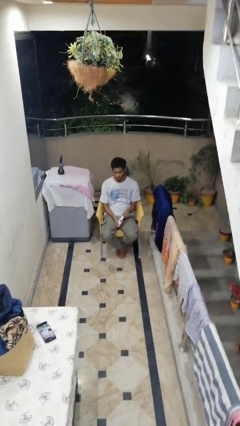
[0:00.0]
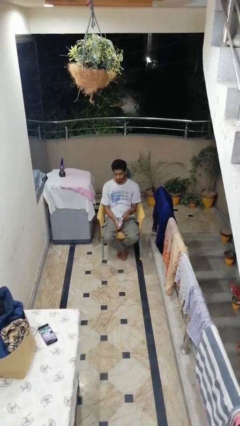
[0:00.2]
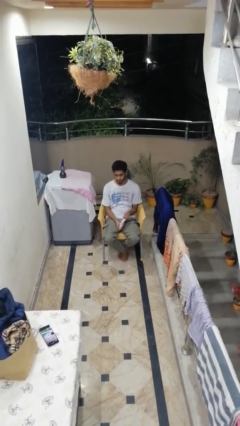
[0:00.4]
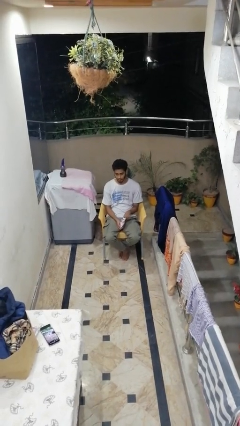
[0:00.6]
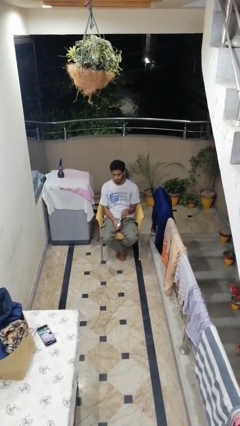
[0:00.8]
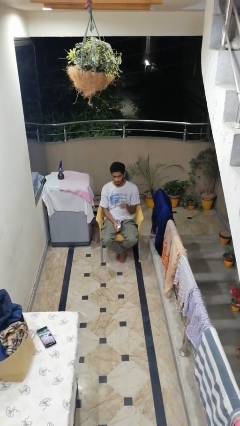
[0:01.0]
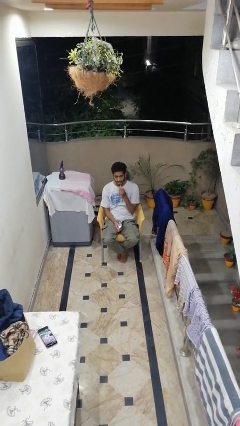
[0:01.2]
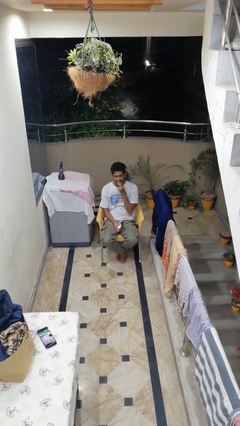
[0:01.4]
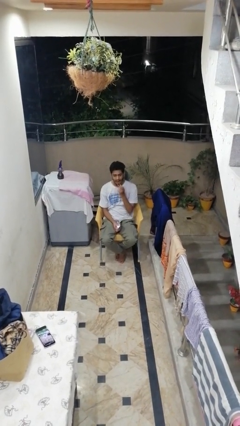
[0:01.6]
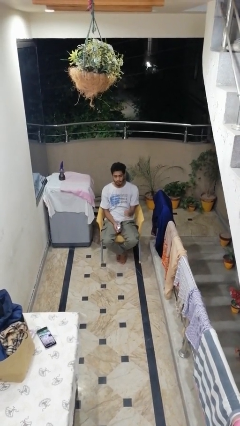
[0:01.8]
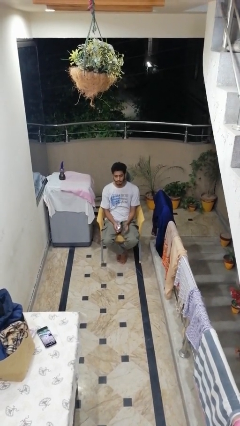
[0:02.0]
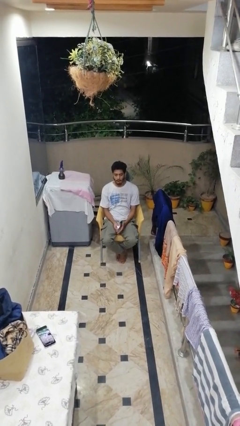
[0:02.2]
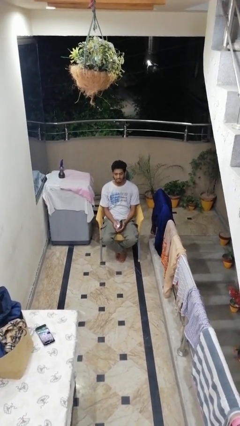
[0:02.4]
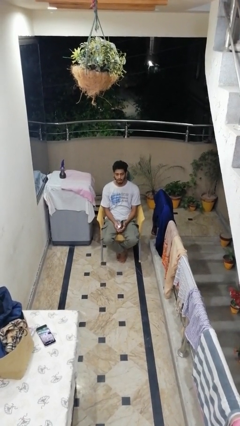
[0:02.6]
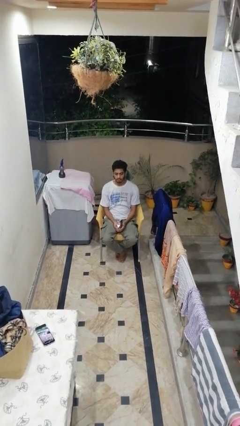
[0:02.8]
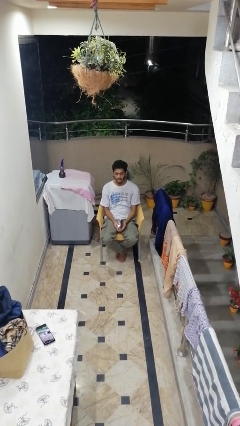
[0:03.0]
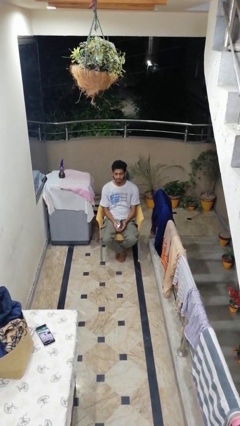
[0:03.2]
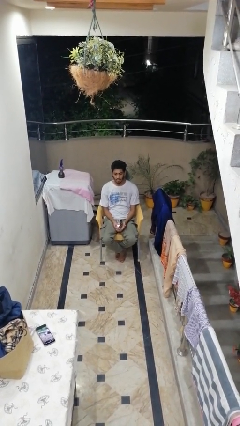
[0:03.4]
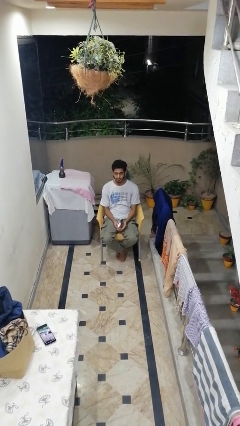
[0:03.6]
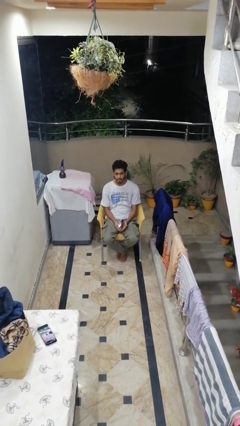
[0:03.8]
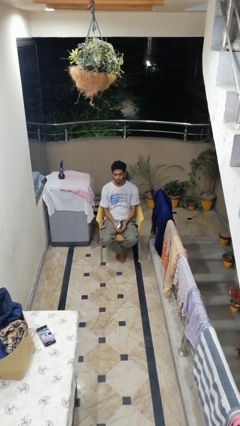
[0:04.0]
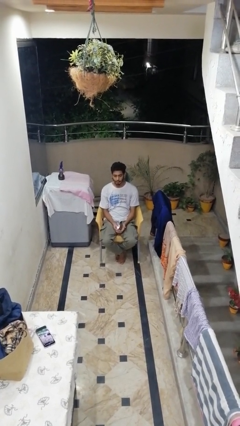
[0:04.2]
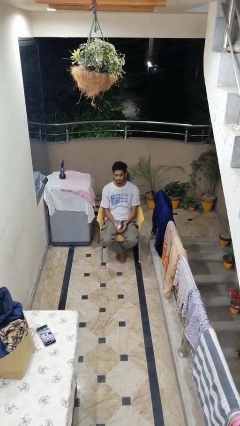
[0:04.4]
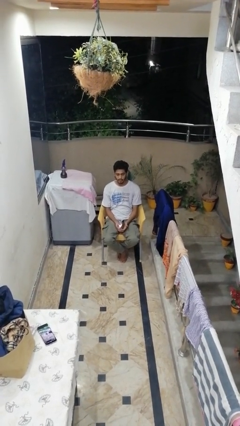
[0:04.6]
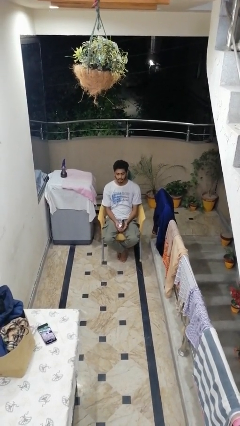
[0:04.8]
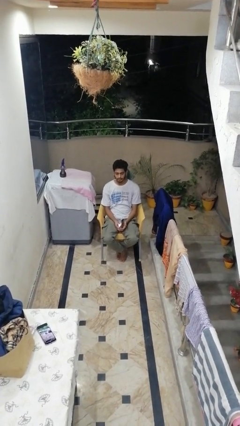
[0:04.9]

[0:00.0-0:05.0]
person eats snack from bag

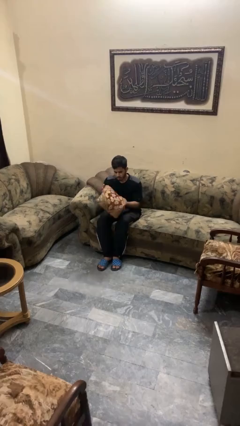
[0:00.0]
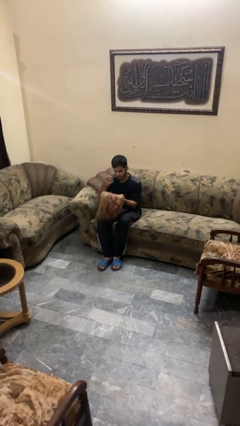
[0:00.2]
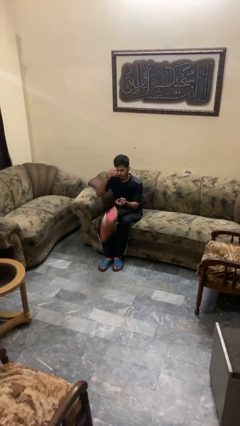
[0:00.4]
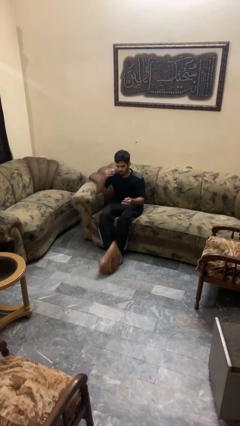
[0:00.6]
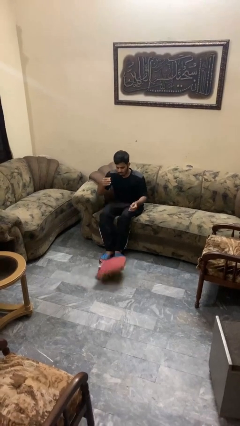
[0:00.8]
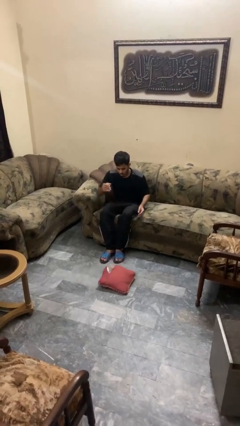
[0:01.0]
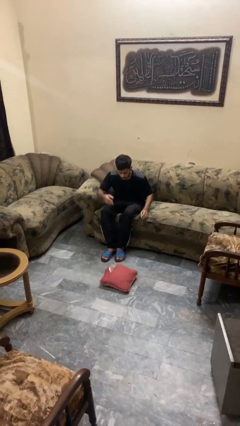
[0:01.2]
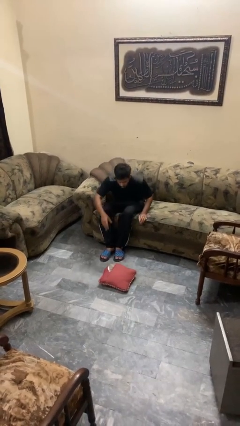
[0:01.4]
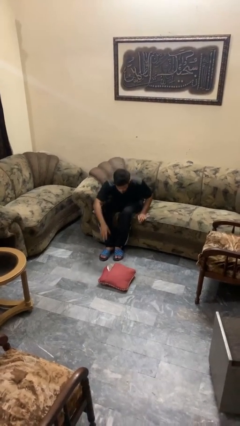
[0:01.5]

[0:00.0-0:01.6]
person drops object

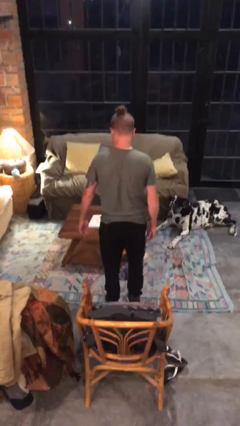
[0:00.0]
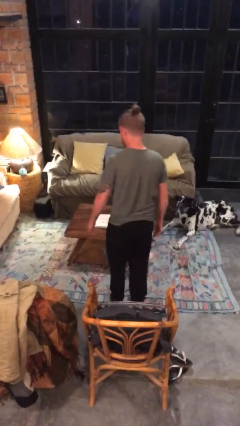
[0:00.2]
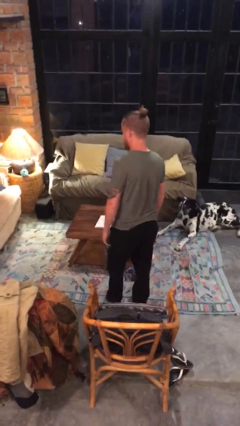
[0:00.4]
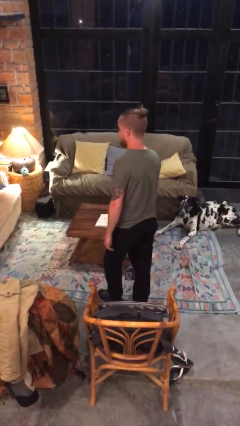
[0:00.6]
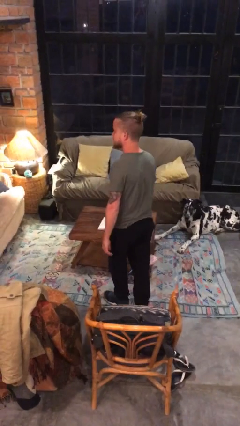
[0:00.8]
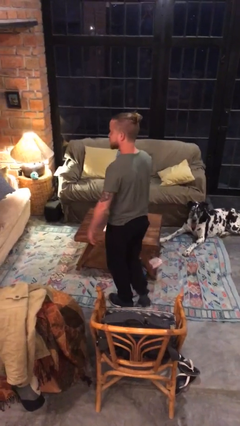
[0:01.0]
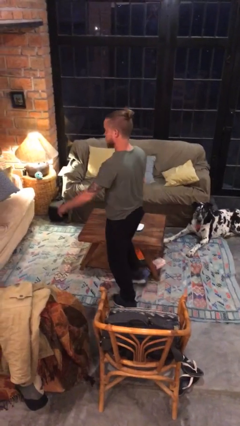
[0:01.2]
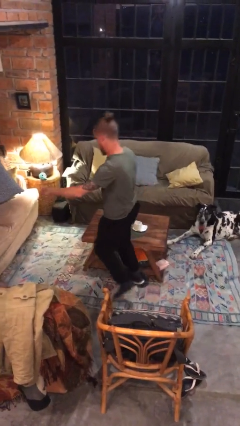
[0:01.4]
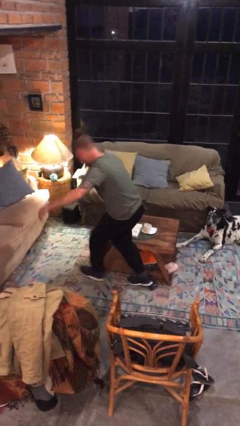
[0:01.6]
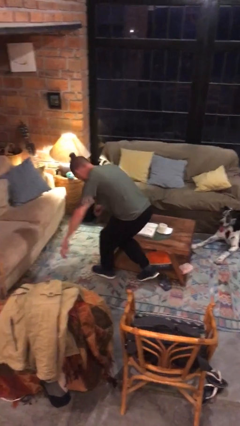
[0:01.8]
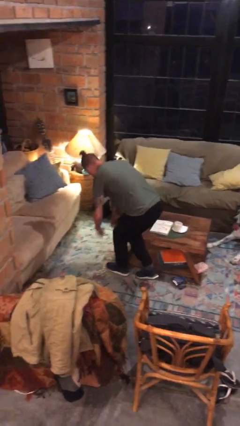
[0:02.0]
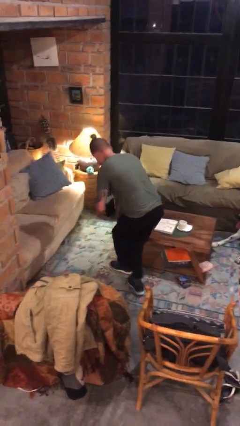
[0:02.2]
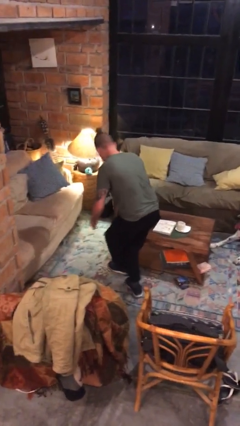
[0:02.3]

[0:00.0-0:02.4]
person bumps into table

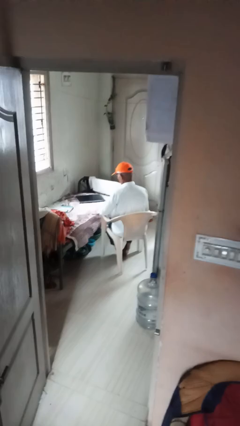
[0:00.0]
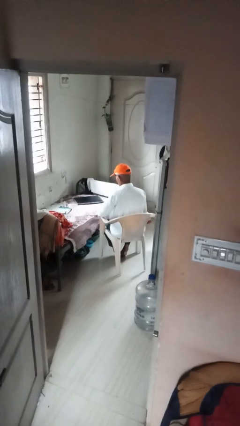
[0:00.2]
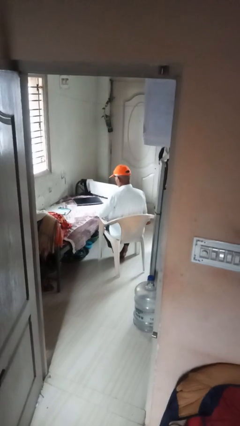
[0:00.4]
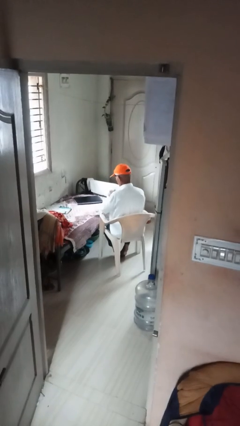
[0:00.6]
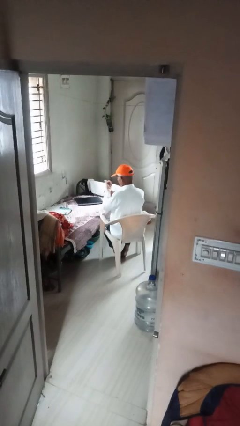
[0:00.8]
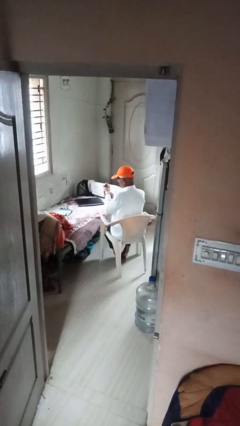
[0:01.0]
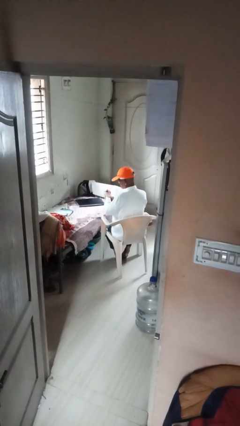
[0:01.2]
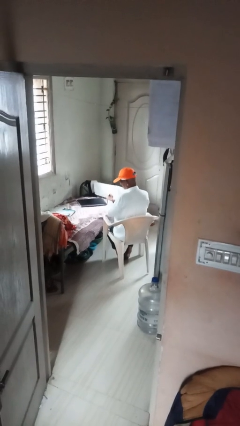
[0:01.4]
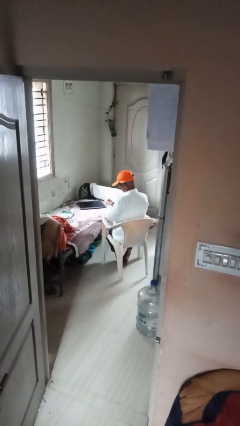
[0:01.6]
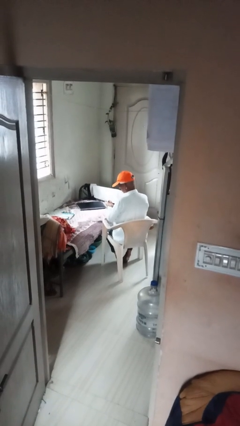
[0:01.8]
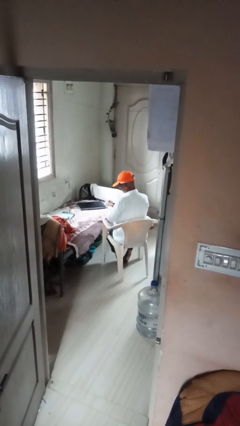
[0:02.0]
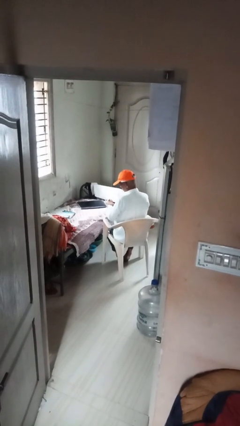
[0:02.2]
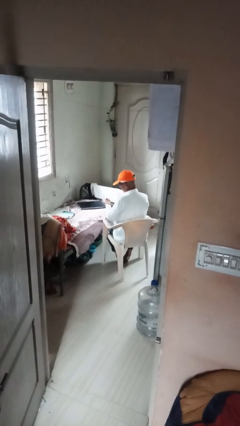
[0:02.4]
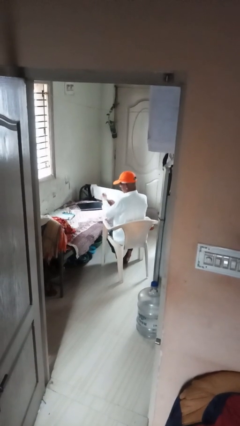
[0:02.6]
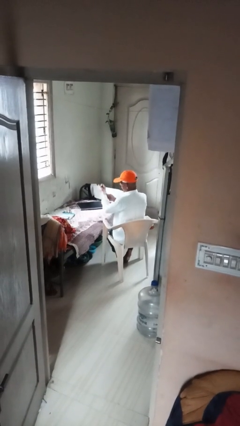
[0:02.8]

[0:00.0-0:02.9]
person looks at wristwatch

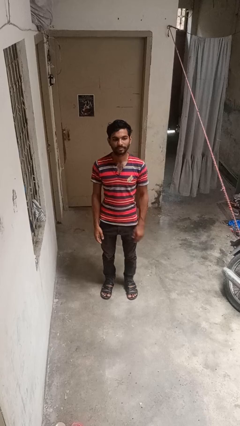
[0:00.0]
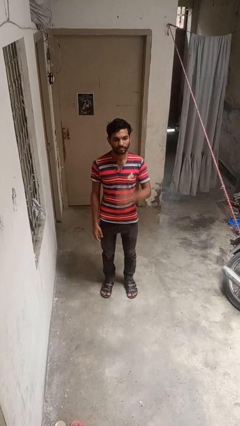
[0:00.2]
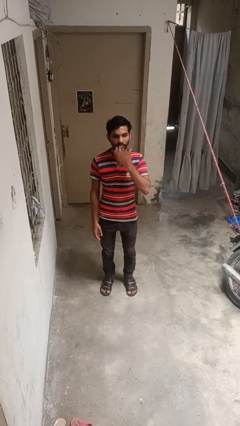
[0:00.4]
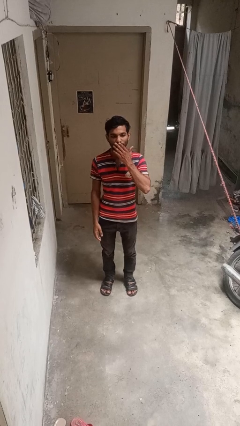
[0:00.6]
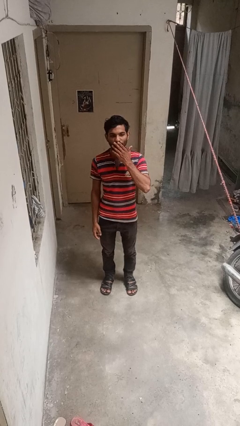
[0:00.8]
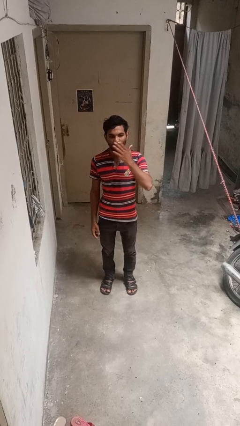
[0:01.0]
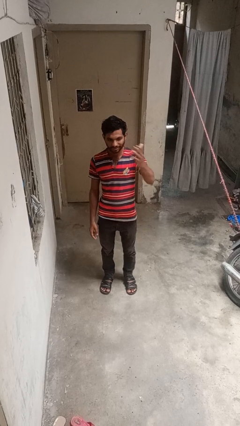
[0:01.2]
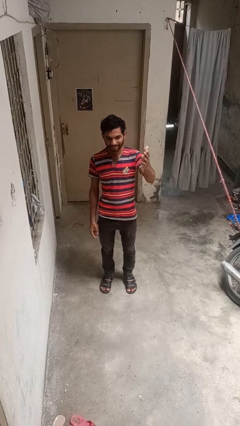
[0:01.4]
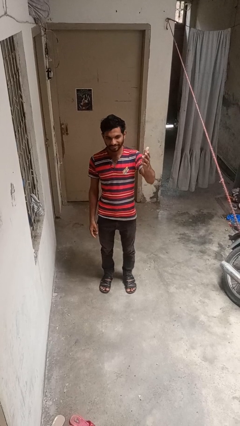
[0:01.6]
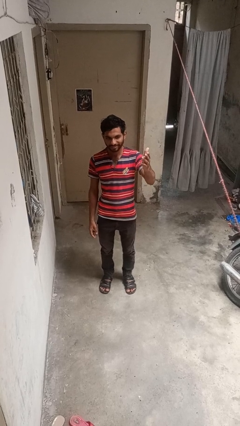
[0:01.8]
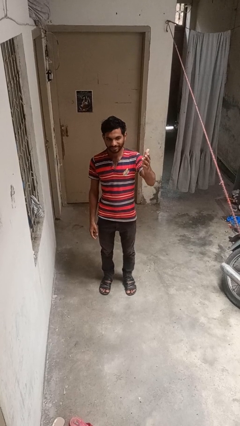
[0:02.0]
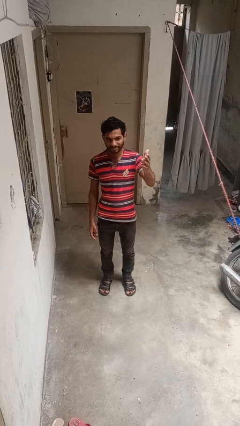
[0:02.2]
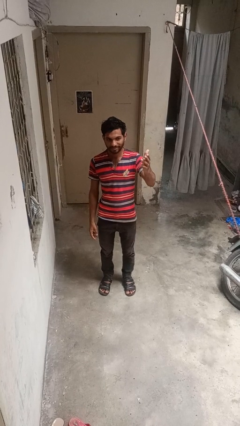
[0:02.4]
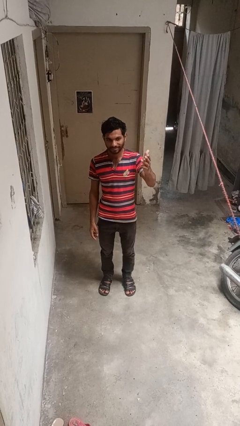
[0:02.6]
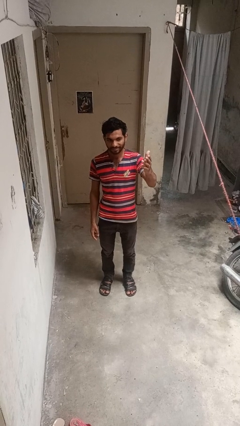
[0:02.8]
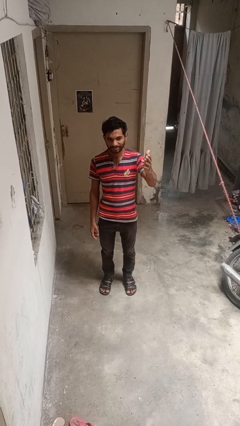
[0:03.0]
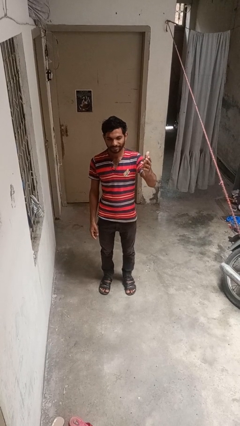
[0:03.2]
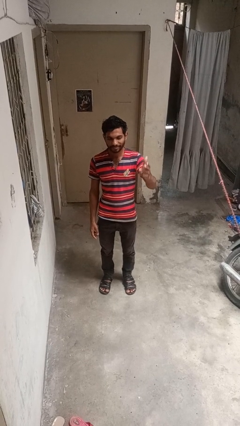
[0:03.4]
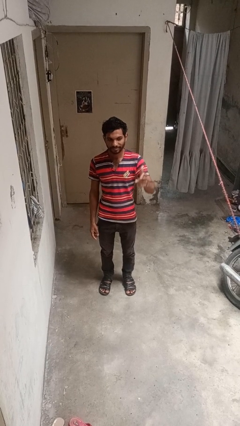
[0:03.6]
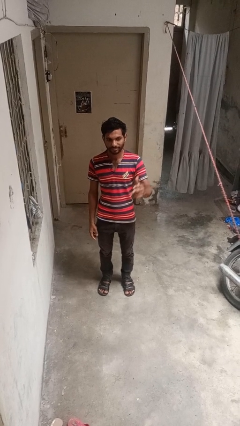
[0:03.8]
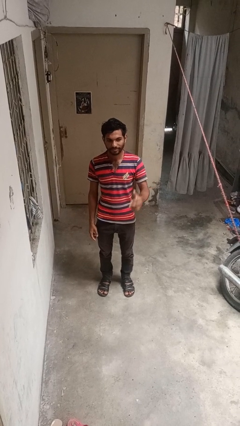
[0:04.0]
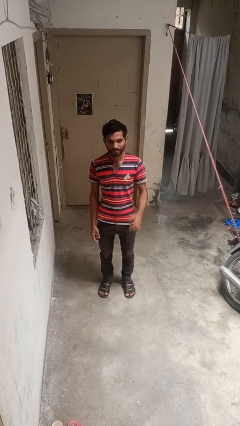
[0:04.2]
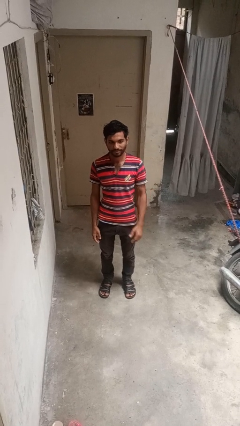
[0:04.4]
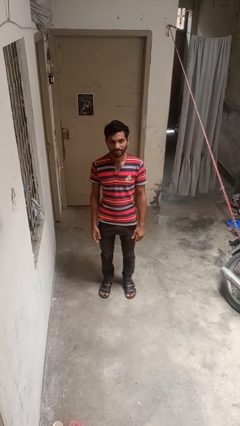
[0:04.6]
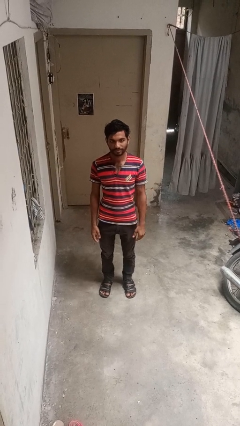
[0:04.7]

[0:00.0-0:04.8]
person gestures blow kiss

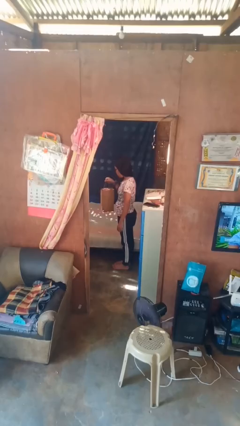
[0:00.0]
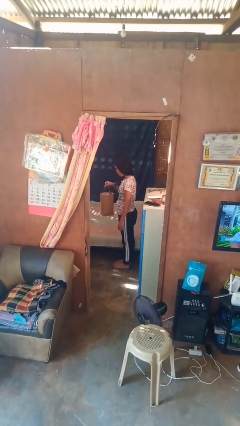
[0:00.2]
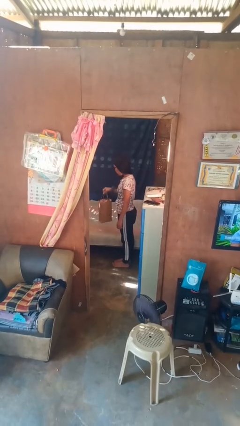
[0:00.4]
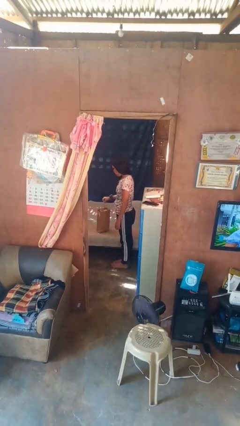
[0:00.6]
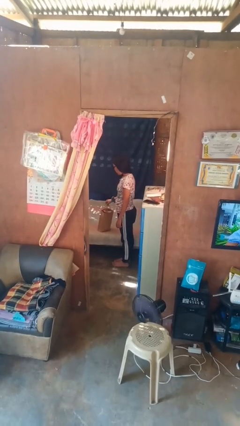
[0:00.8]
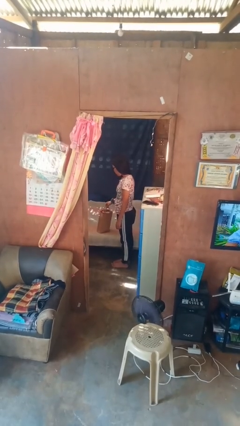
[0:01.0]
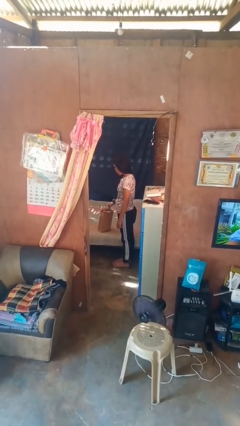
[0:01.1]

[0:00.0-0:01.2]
person puts down object on bed
